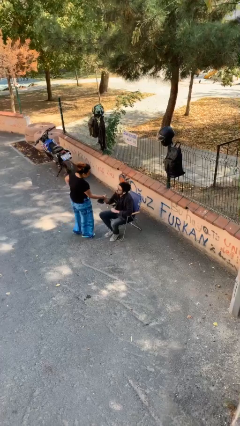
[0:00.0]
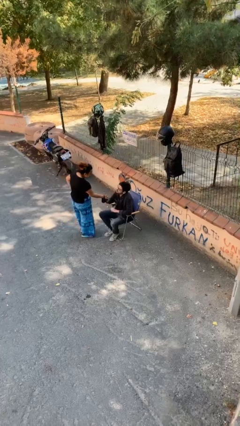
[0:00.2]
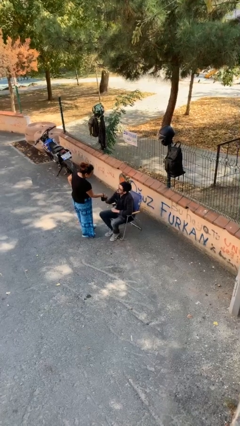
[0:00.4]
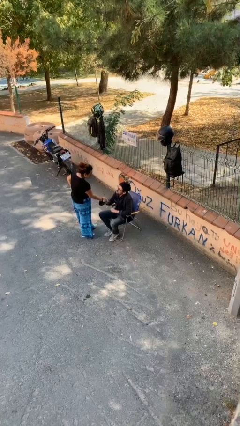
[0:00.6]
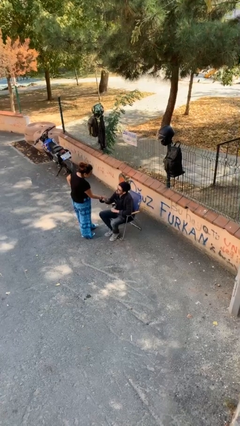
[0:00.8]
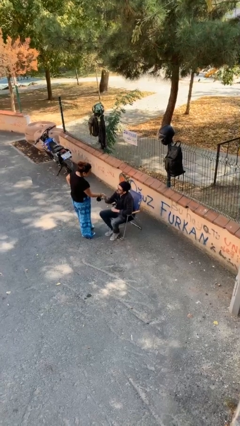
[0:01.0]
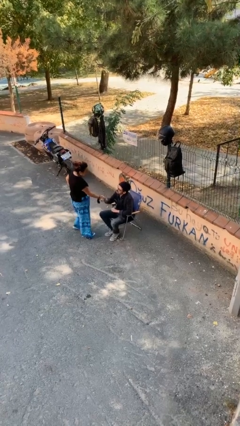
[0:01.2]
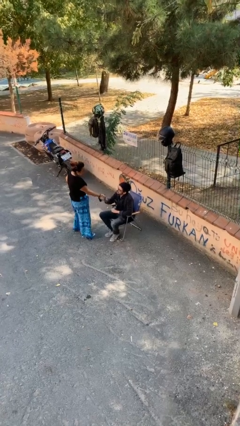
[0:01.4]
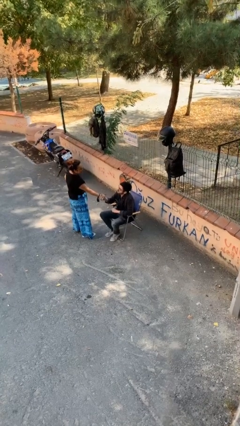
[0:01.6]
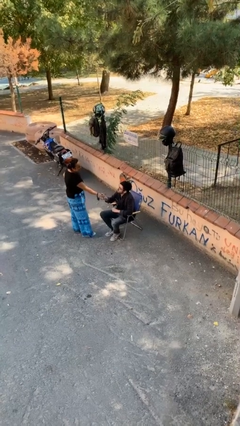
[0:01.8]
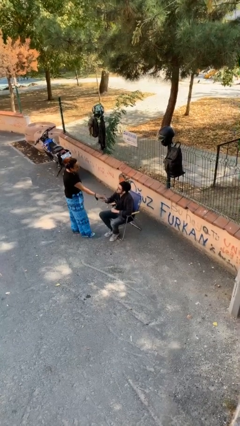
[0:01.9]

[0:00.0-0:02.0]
person shakes hand

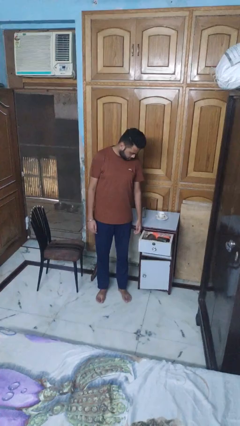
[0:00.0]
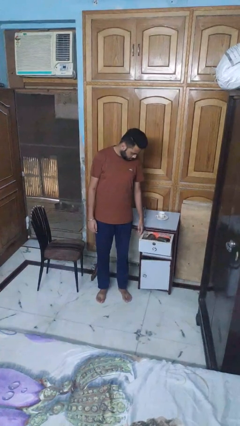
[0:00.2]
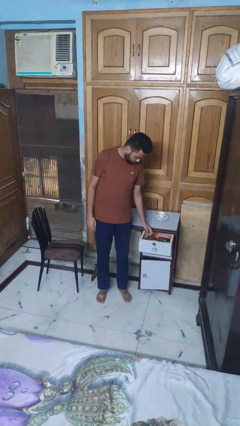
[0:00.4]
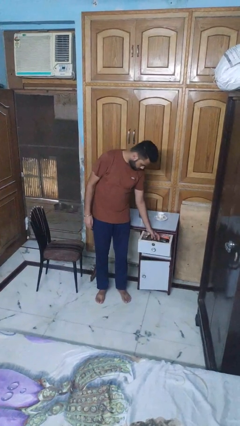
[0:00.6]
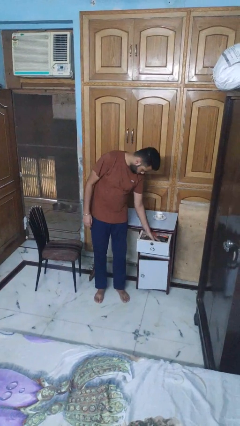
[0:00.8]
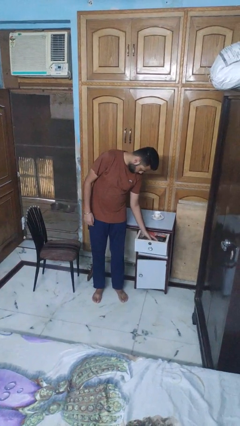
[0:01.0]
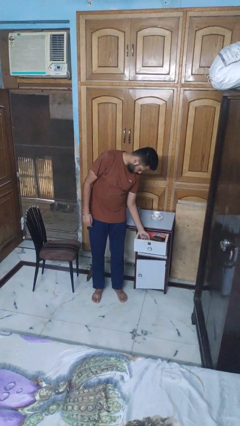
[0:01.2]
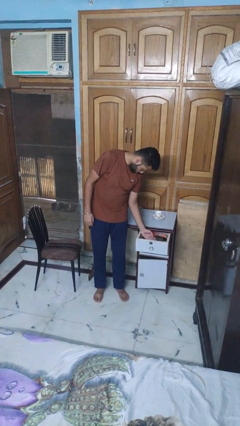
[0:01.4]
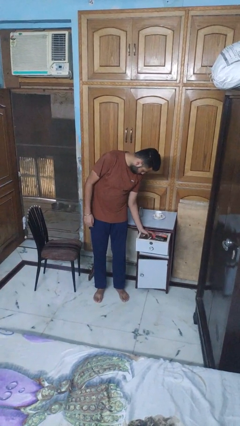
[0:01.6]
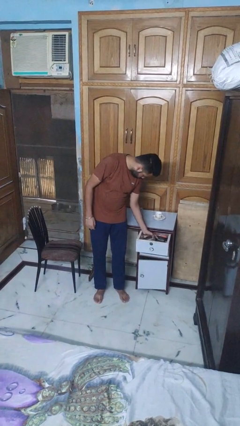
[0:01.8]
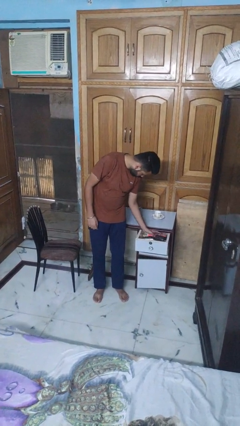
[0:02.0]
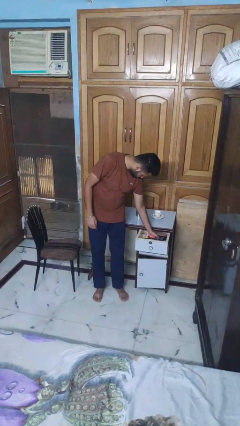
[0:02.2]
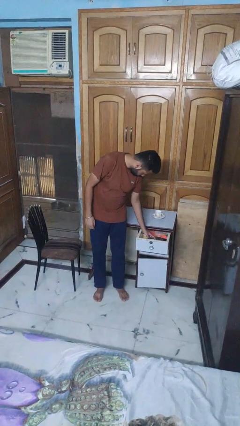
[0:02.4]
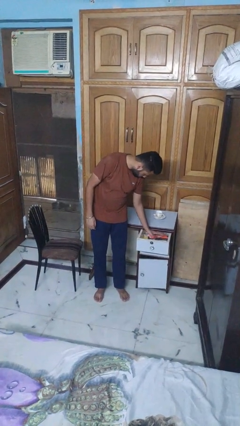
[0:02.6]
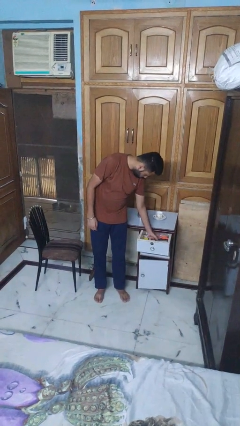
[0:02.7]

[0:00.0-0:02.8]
person searches in kitchen drawer

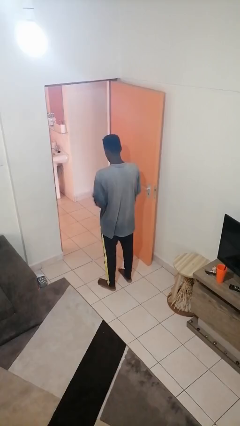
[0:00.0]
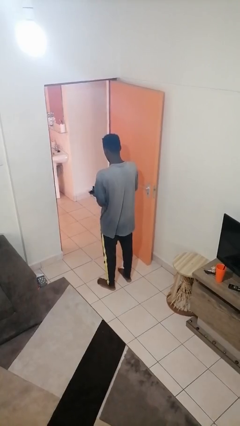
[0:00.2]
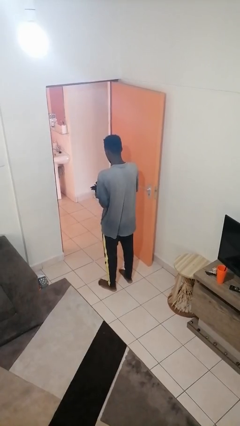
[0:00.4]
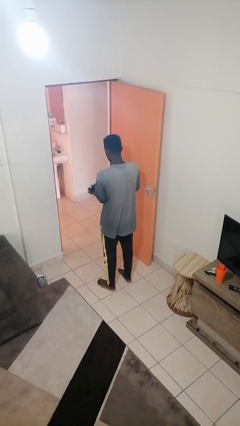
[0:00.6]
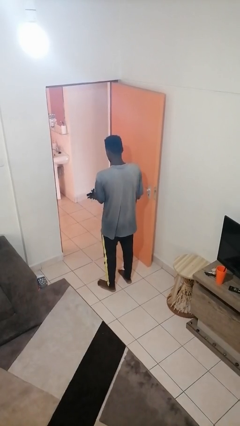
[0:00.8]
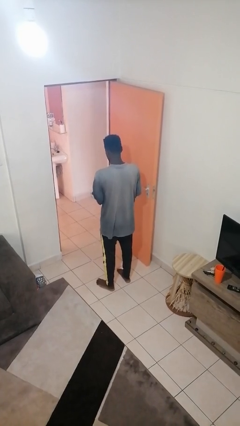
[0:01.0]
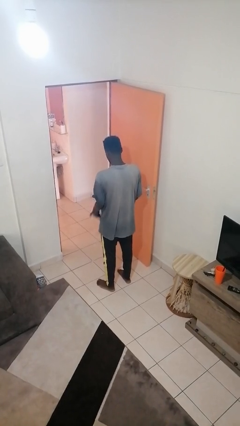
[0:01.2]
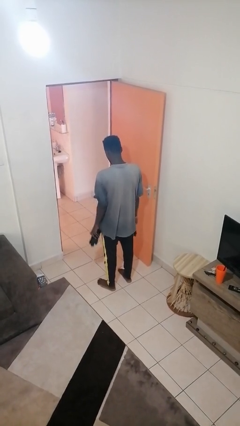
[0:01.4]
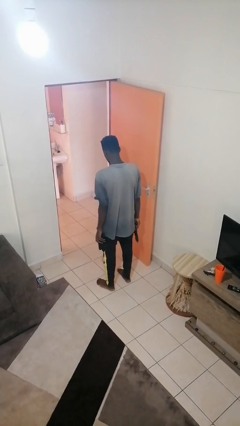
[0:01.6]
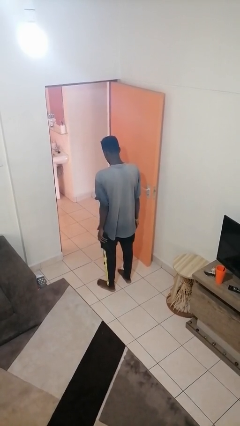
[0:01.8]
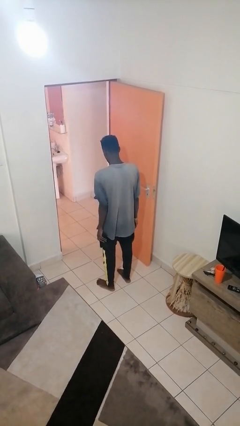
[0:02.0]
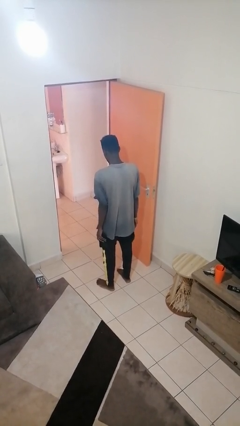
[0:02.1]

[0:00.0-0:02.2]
person takes off gloves

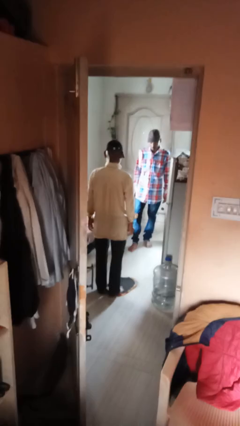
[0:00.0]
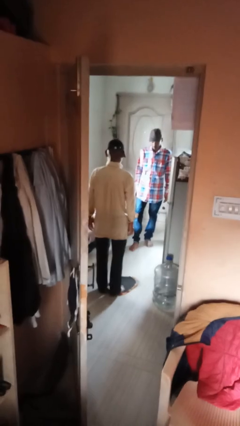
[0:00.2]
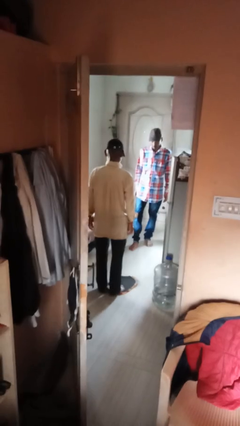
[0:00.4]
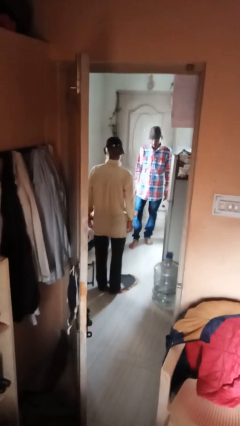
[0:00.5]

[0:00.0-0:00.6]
person kicks object to person

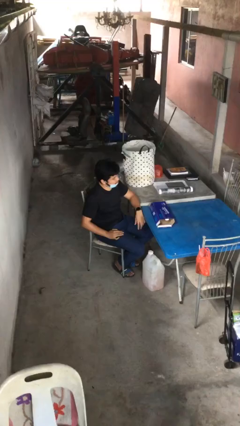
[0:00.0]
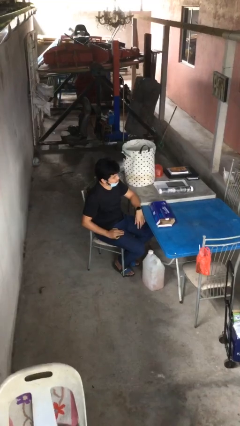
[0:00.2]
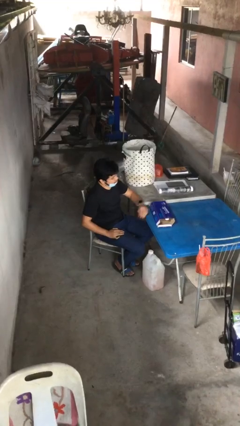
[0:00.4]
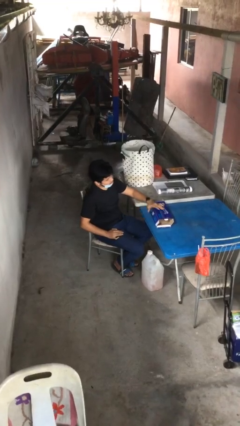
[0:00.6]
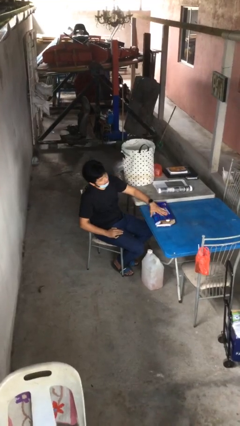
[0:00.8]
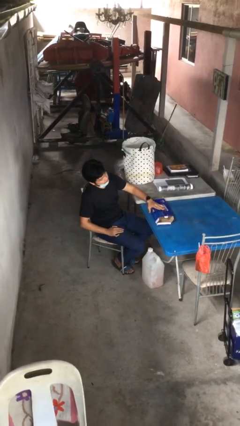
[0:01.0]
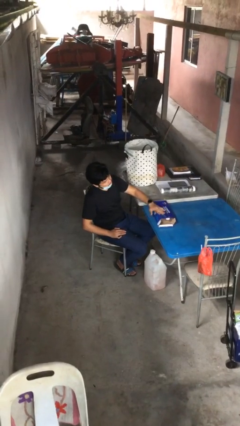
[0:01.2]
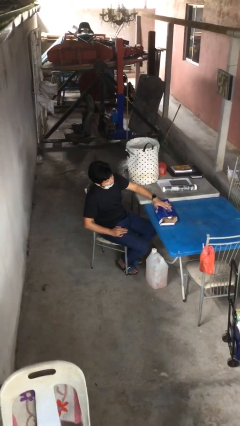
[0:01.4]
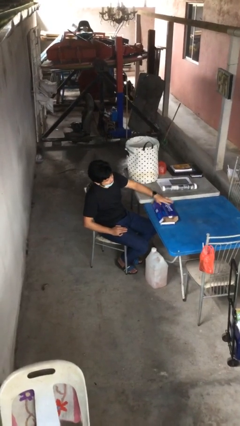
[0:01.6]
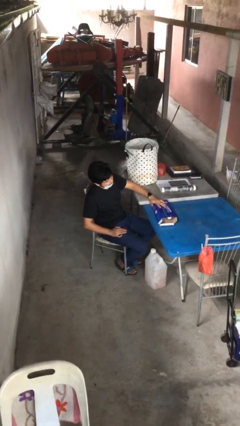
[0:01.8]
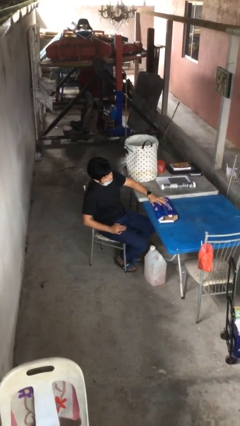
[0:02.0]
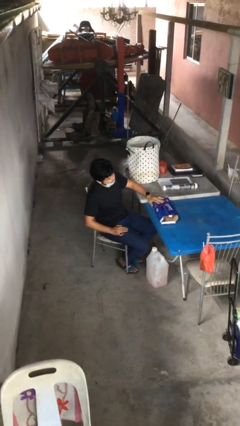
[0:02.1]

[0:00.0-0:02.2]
person taps object with finger

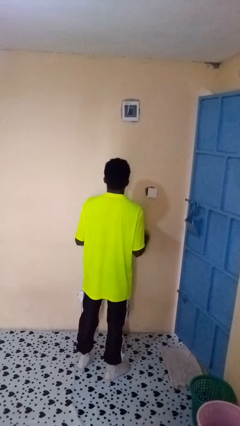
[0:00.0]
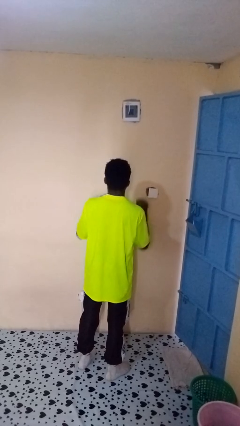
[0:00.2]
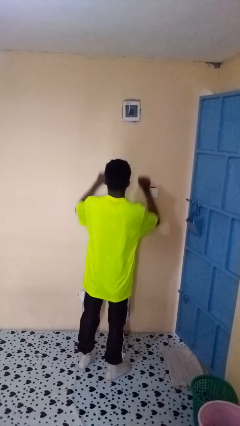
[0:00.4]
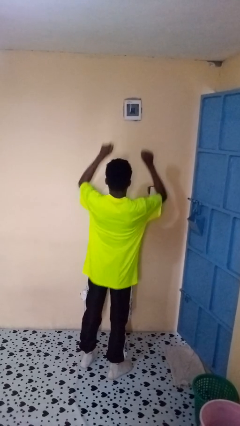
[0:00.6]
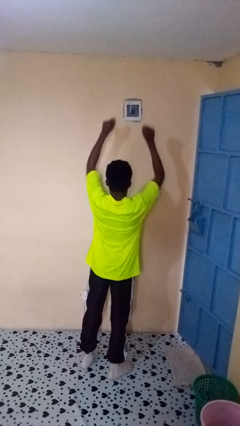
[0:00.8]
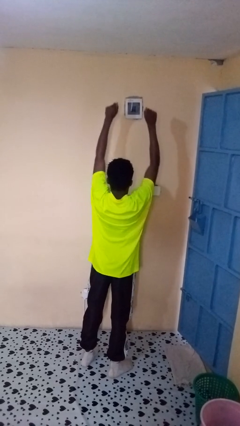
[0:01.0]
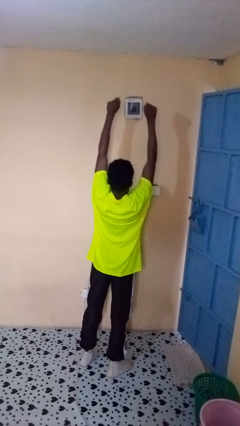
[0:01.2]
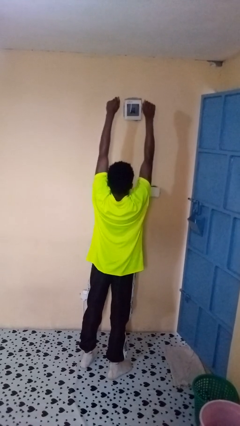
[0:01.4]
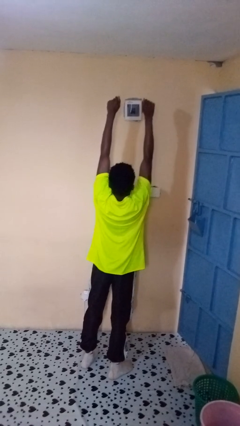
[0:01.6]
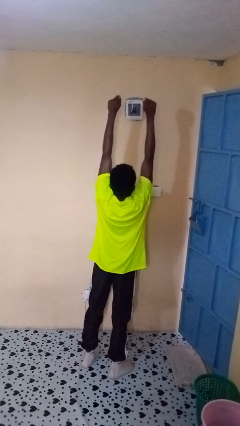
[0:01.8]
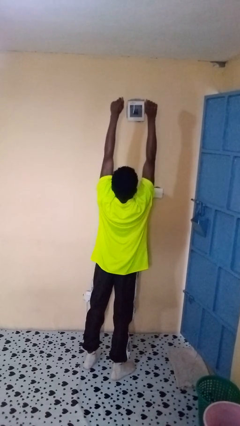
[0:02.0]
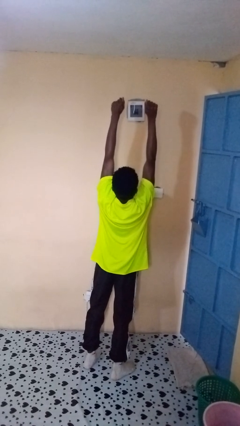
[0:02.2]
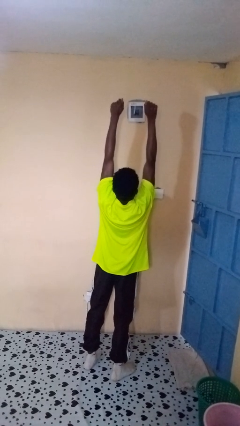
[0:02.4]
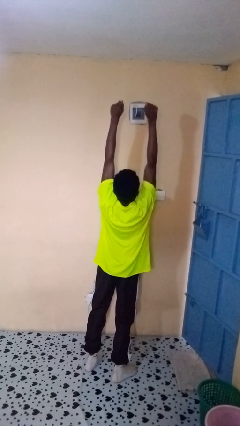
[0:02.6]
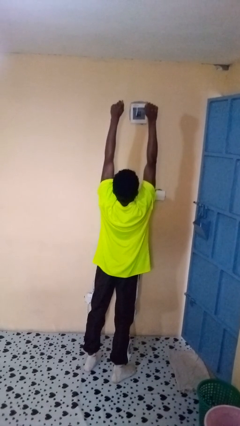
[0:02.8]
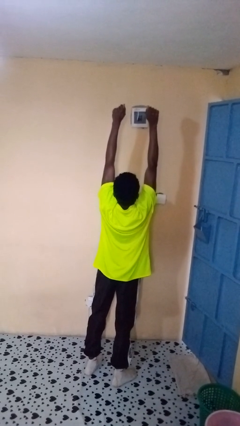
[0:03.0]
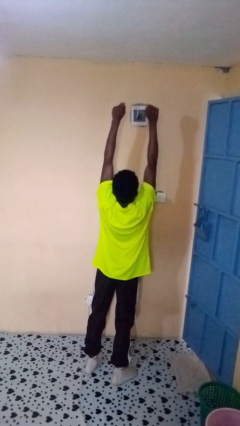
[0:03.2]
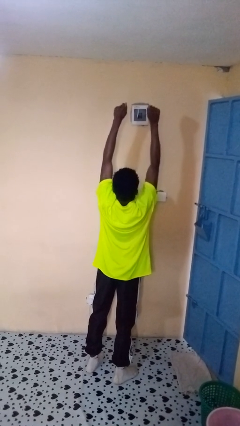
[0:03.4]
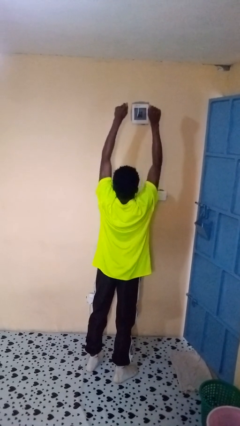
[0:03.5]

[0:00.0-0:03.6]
person stretches arms over head

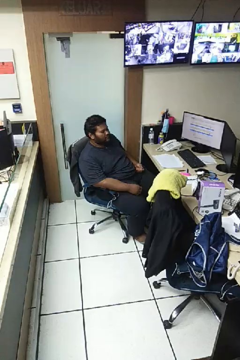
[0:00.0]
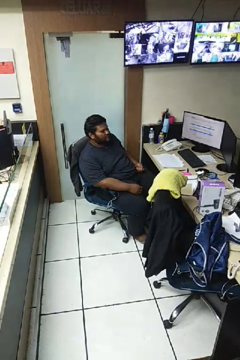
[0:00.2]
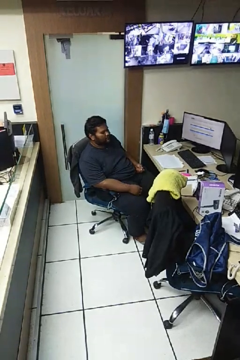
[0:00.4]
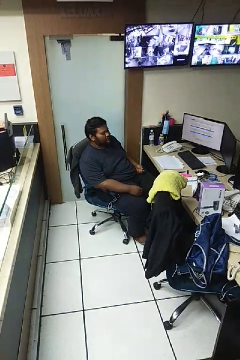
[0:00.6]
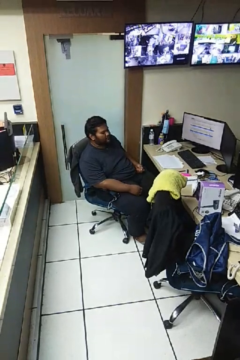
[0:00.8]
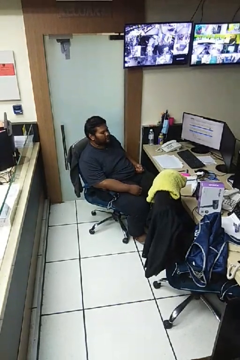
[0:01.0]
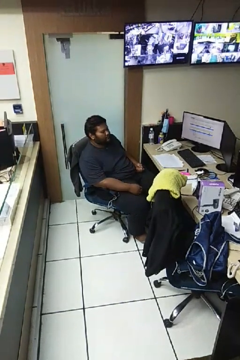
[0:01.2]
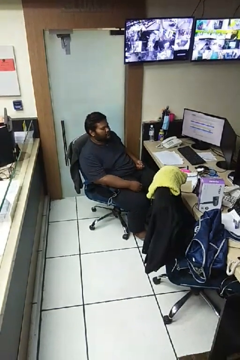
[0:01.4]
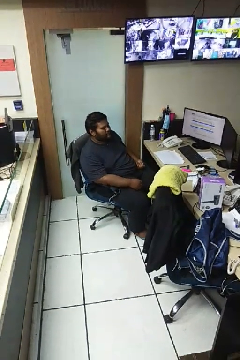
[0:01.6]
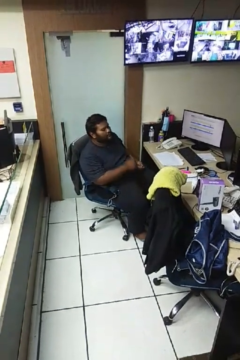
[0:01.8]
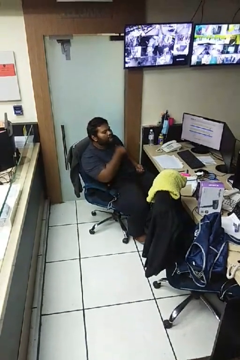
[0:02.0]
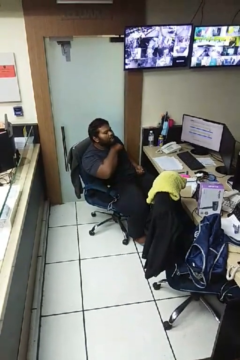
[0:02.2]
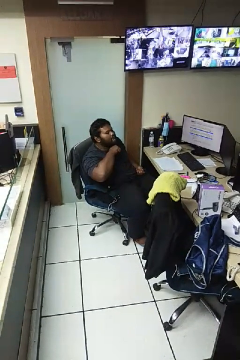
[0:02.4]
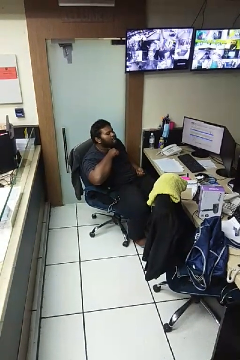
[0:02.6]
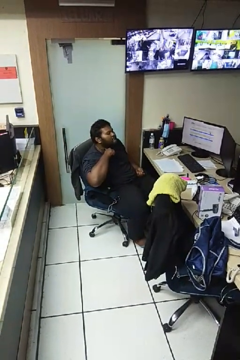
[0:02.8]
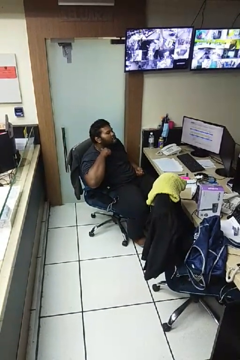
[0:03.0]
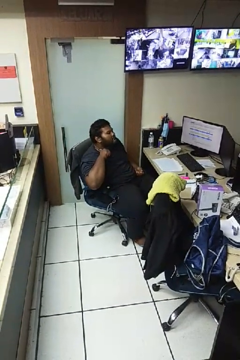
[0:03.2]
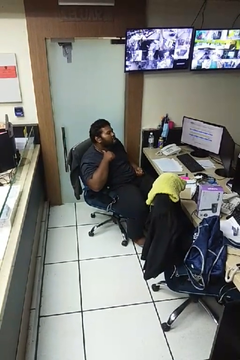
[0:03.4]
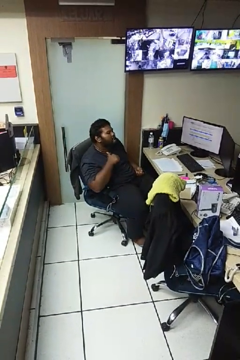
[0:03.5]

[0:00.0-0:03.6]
person gestures cut

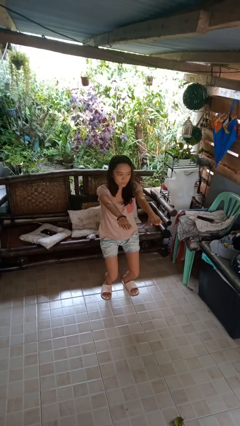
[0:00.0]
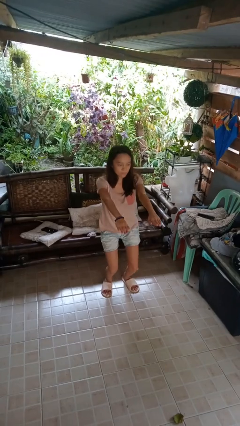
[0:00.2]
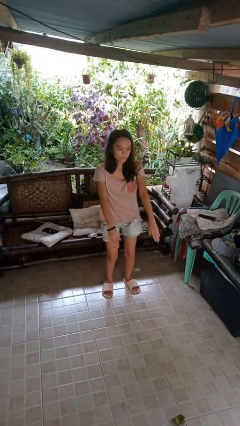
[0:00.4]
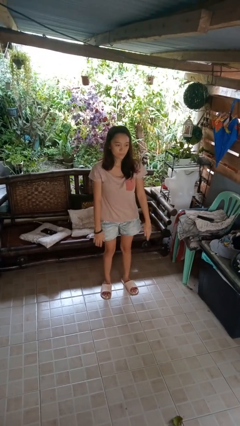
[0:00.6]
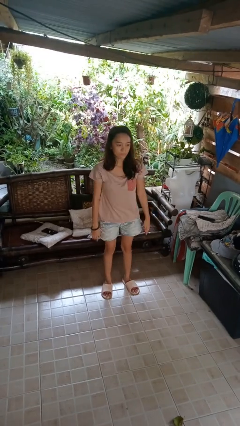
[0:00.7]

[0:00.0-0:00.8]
person stands up

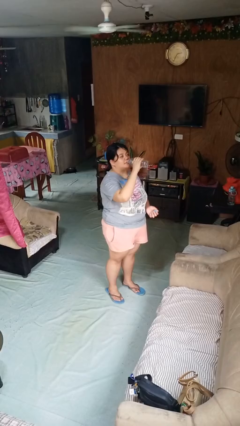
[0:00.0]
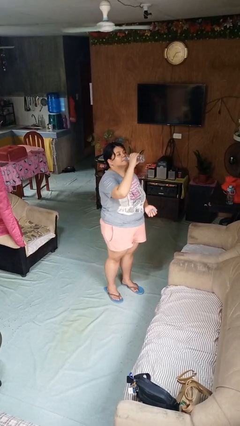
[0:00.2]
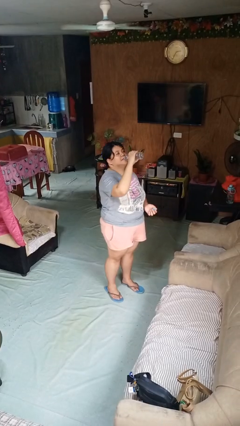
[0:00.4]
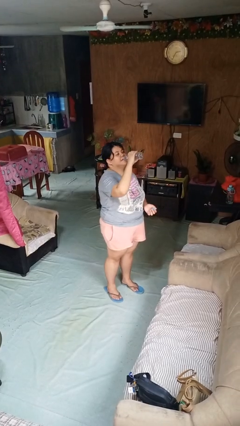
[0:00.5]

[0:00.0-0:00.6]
person drinks from bottle
